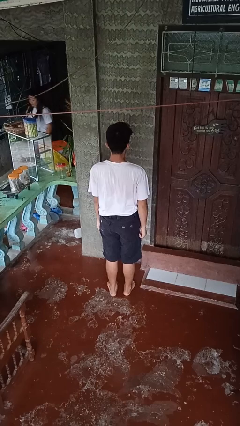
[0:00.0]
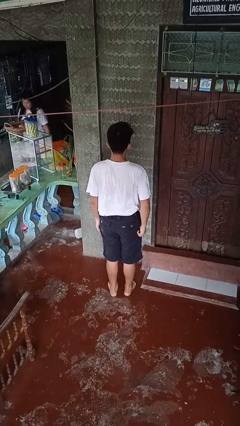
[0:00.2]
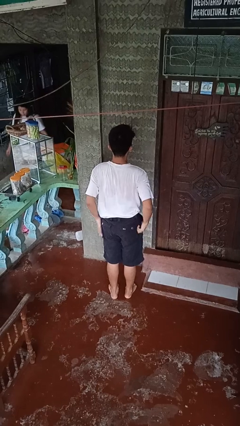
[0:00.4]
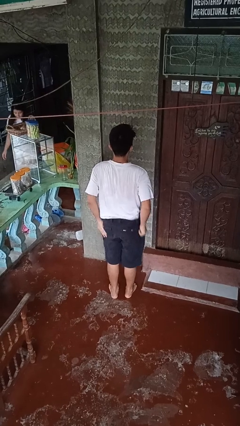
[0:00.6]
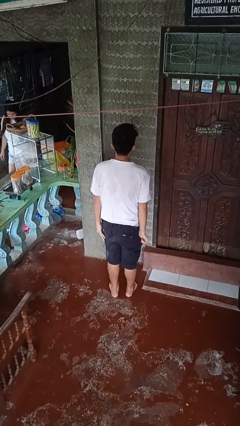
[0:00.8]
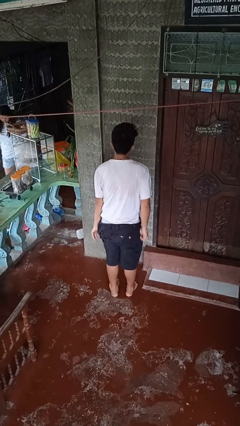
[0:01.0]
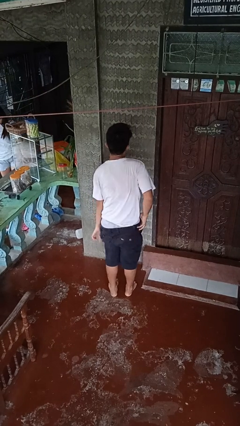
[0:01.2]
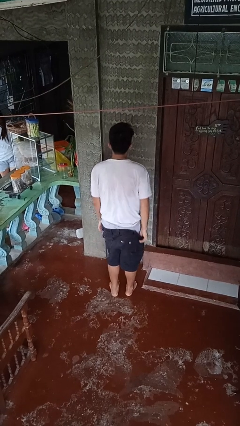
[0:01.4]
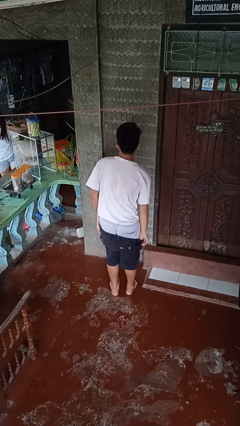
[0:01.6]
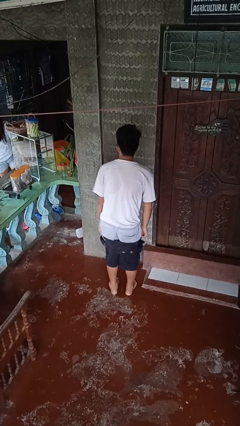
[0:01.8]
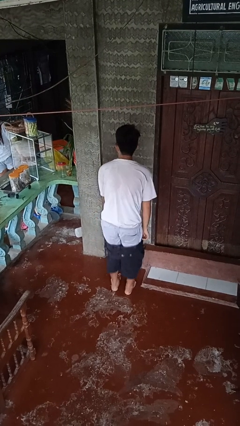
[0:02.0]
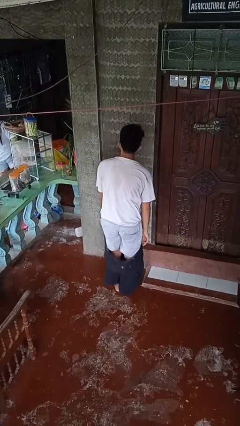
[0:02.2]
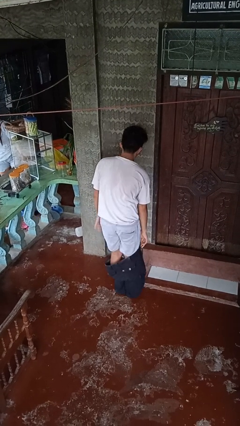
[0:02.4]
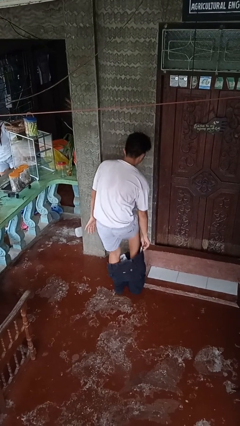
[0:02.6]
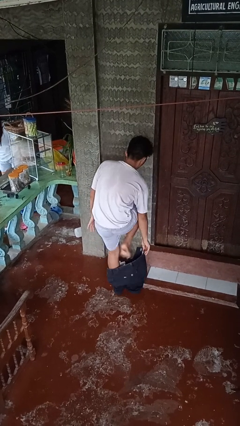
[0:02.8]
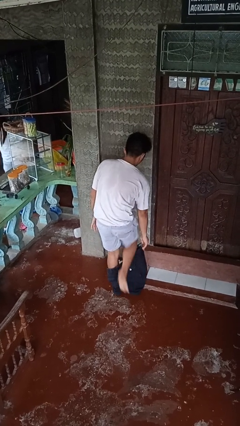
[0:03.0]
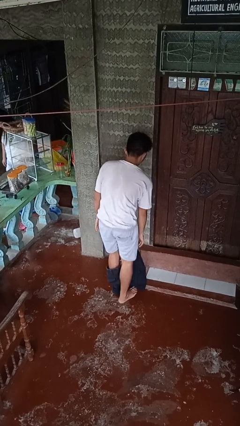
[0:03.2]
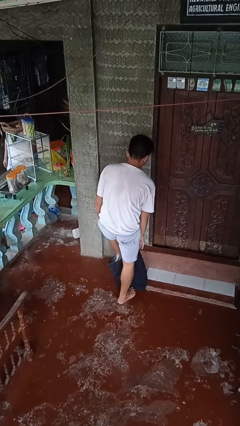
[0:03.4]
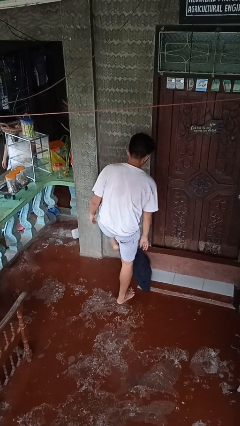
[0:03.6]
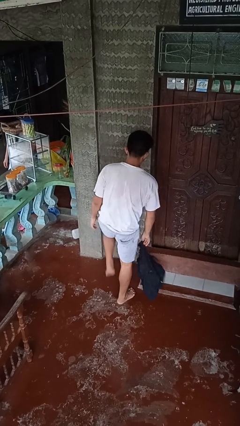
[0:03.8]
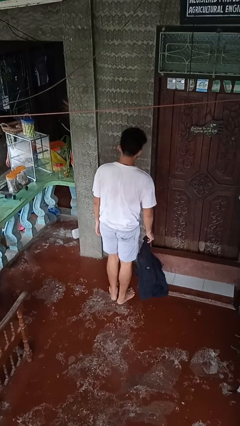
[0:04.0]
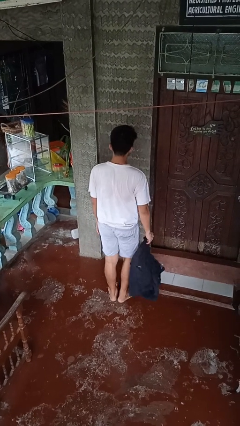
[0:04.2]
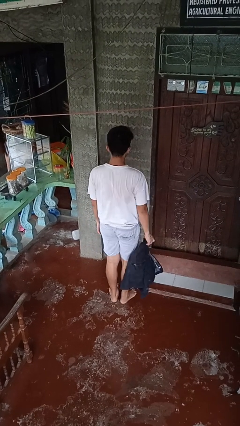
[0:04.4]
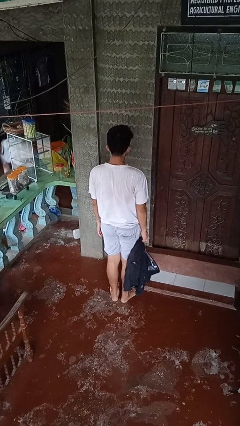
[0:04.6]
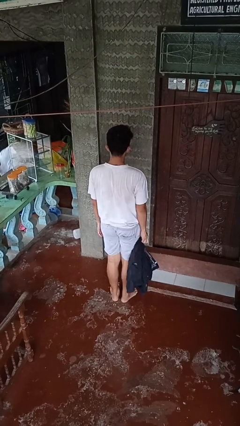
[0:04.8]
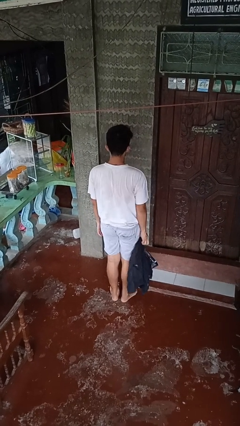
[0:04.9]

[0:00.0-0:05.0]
person takes off pants

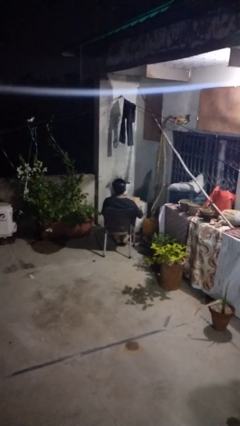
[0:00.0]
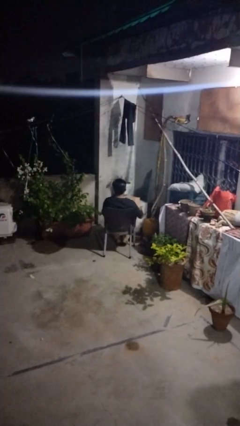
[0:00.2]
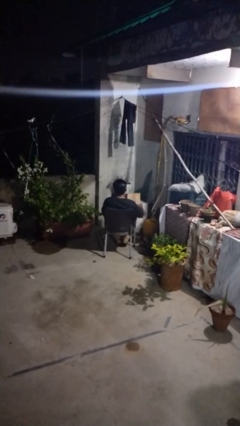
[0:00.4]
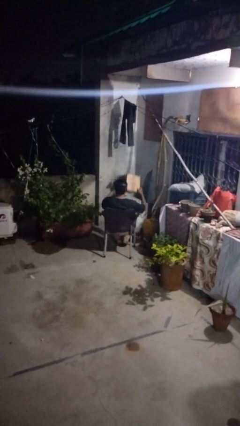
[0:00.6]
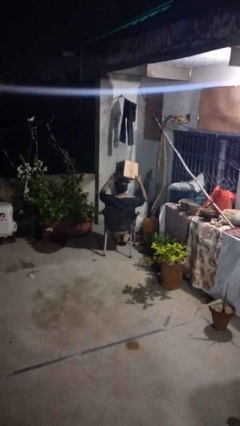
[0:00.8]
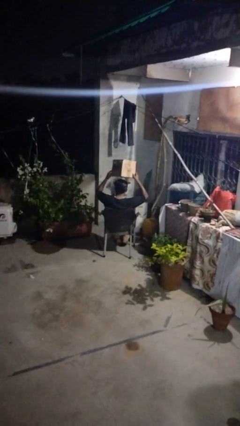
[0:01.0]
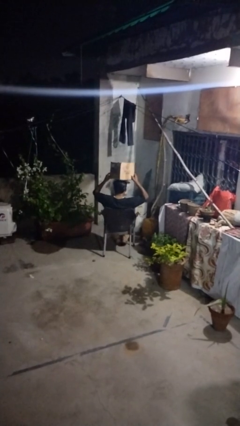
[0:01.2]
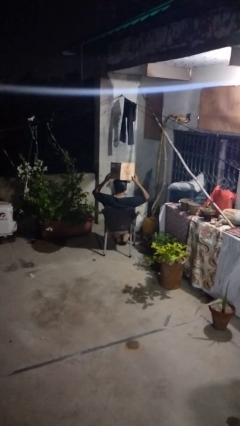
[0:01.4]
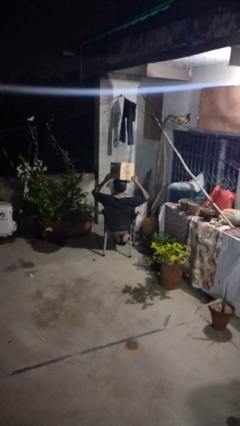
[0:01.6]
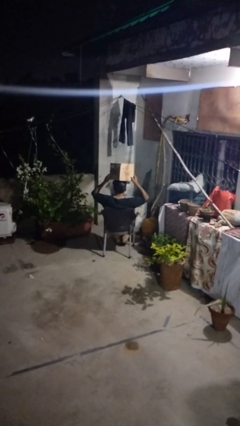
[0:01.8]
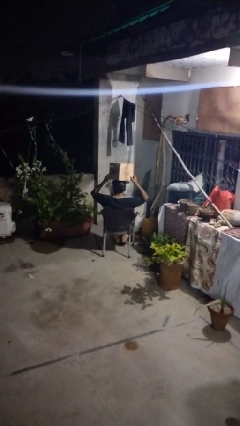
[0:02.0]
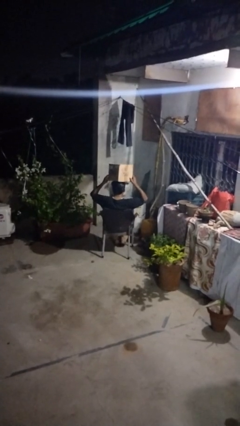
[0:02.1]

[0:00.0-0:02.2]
person holds object above head

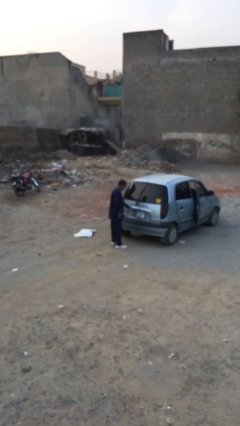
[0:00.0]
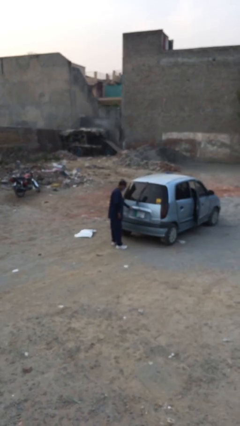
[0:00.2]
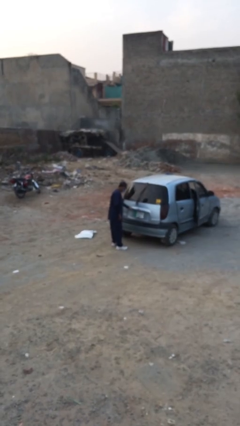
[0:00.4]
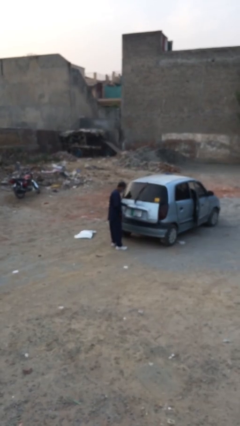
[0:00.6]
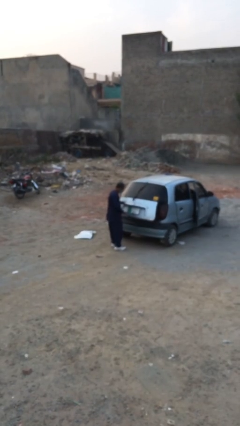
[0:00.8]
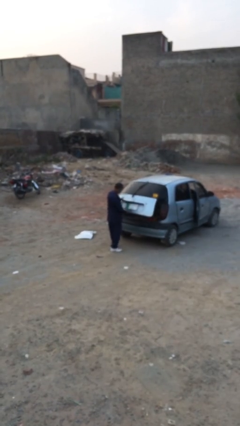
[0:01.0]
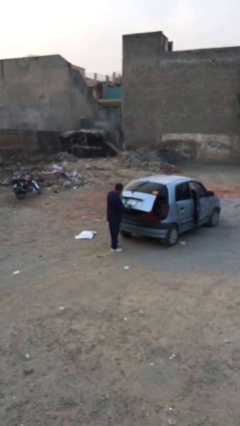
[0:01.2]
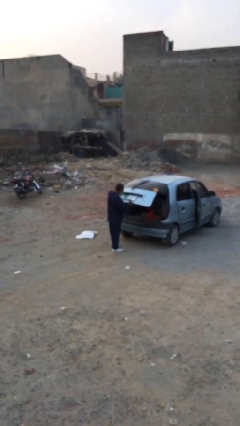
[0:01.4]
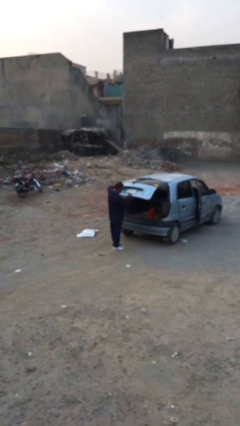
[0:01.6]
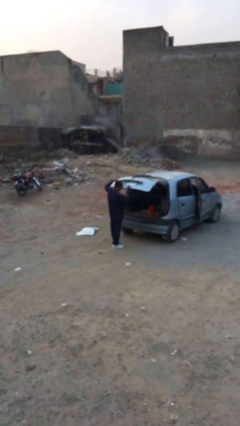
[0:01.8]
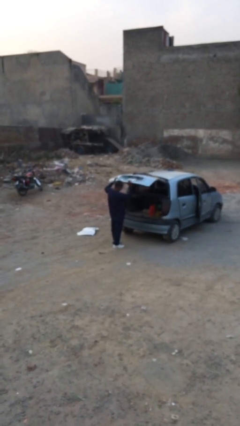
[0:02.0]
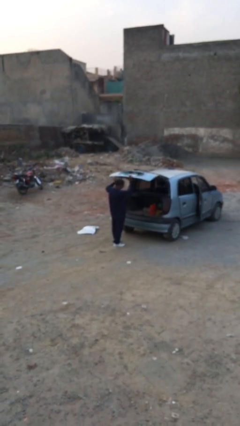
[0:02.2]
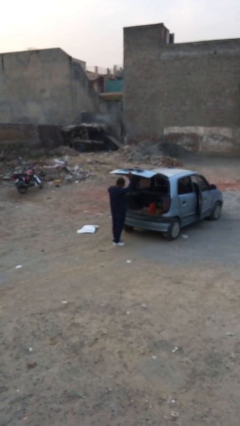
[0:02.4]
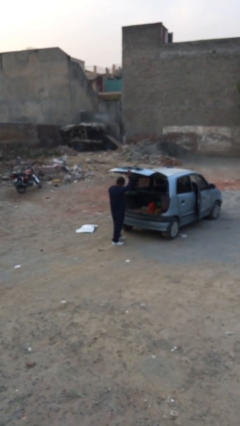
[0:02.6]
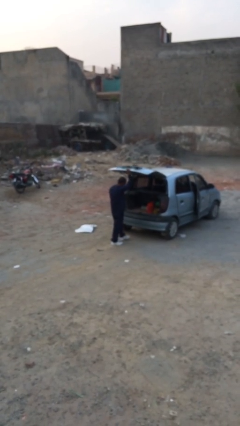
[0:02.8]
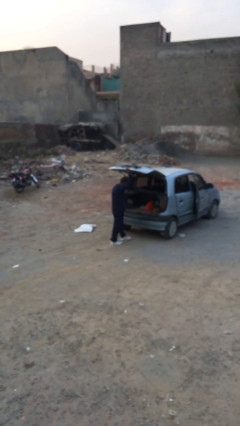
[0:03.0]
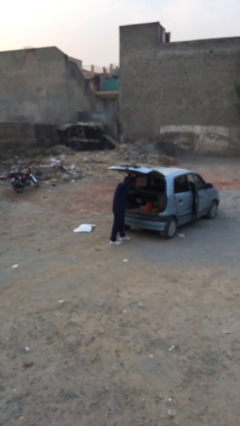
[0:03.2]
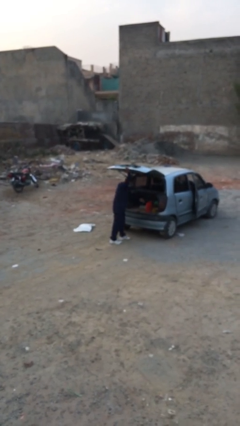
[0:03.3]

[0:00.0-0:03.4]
person opens car trunk

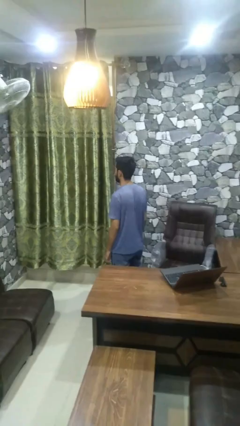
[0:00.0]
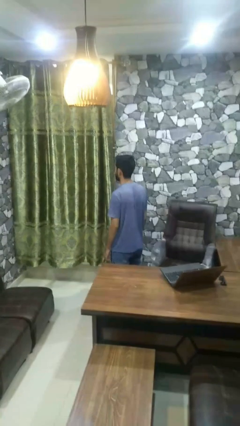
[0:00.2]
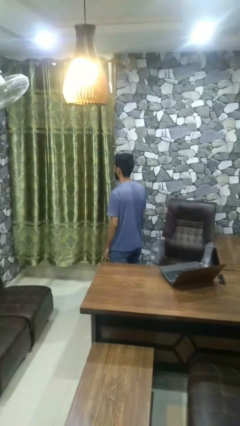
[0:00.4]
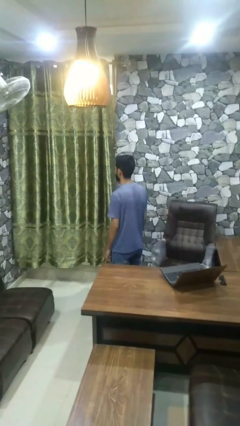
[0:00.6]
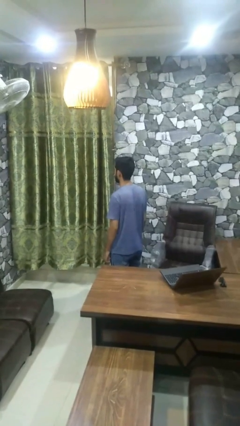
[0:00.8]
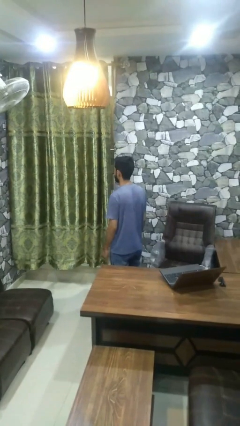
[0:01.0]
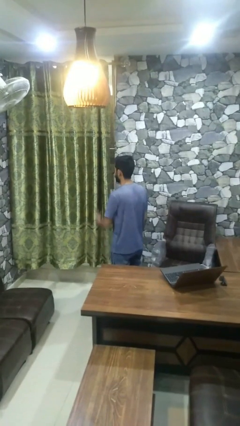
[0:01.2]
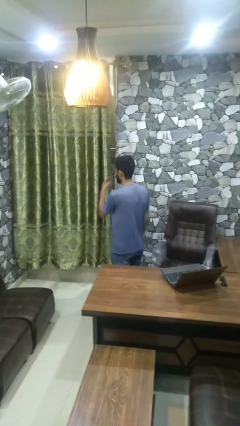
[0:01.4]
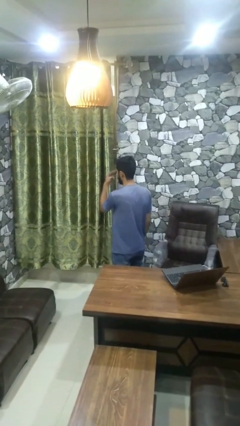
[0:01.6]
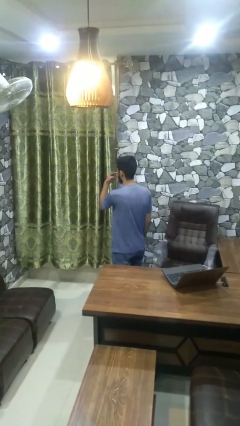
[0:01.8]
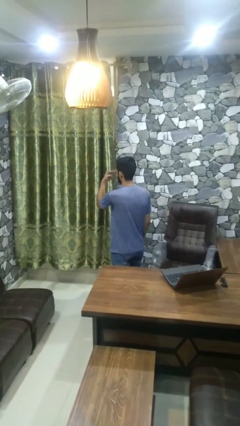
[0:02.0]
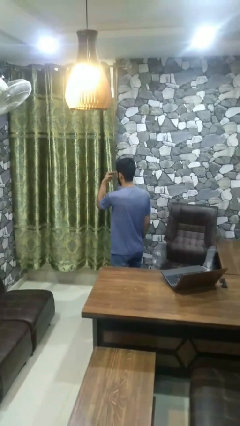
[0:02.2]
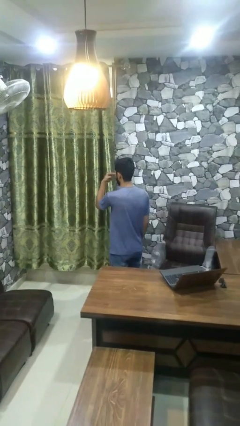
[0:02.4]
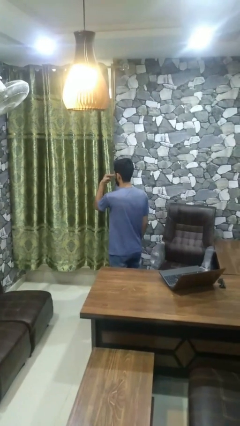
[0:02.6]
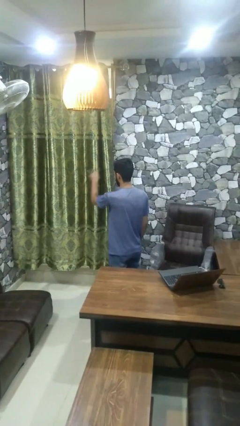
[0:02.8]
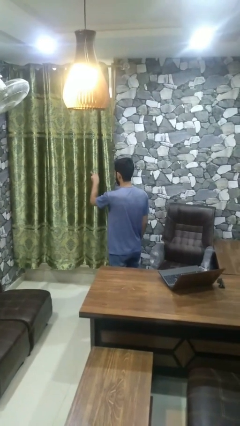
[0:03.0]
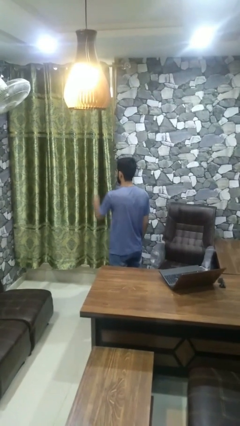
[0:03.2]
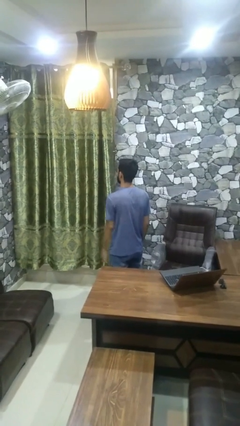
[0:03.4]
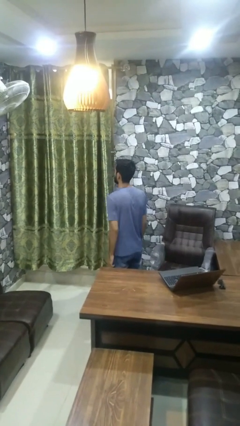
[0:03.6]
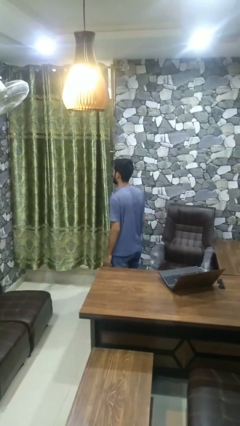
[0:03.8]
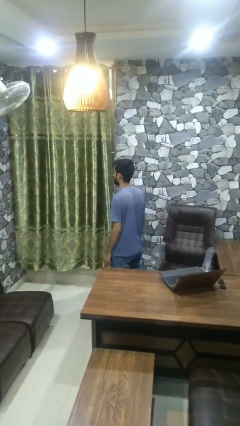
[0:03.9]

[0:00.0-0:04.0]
person gestures watch closely

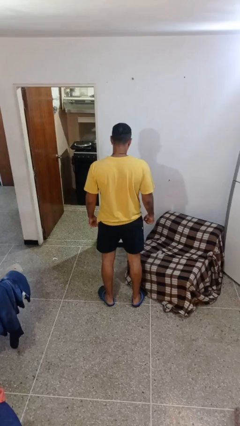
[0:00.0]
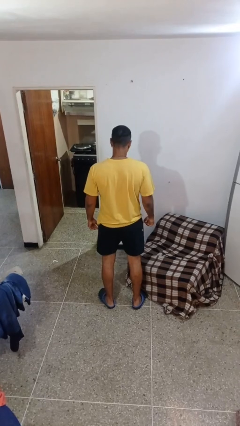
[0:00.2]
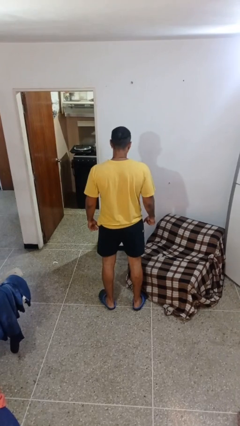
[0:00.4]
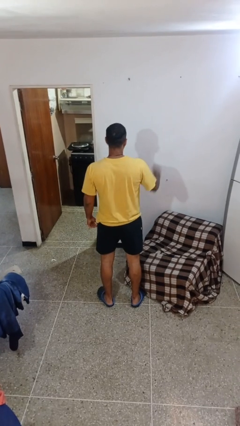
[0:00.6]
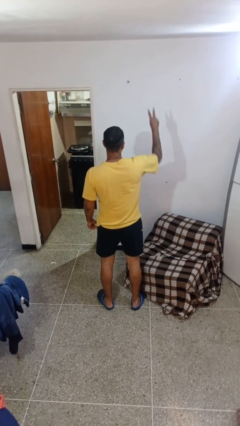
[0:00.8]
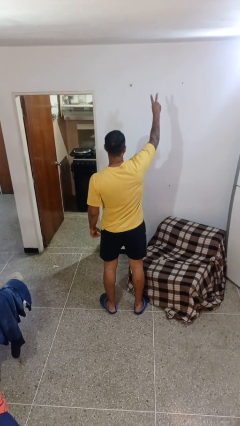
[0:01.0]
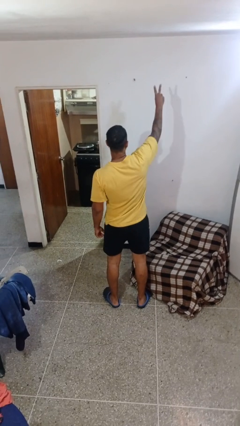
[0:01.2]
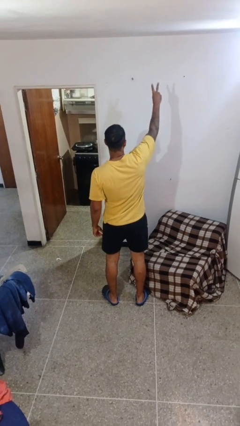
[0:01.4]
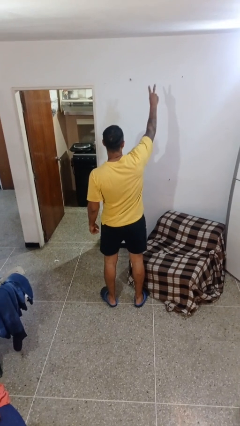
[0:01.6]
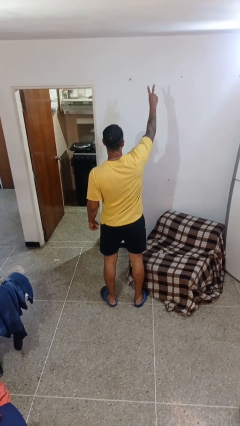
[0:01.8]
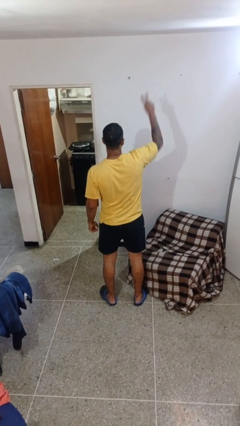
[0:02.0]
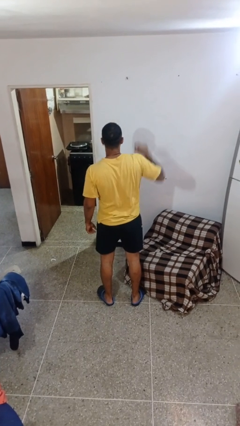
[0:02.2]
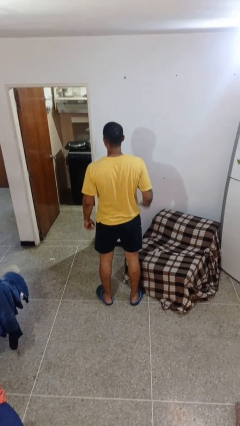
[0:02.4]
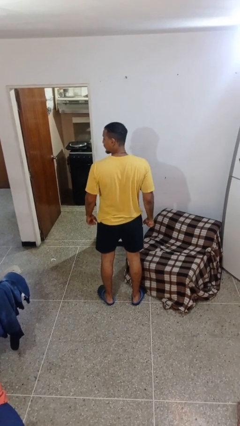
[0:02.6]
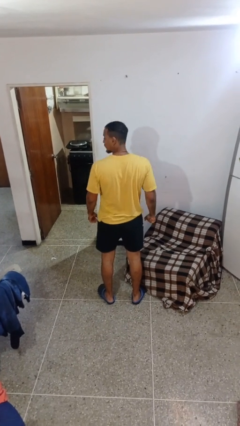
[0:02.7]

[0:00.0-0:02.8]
person gestures peace
